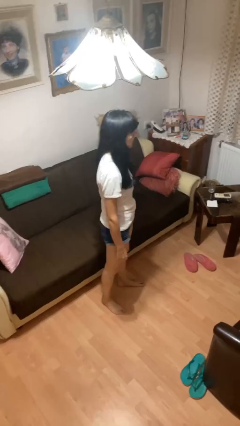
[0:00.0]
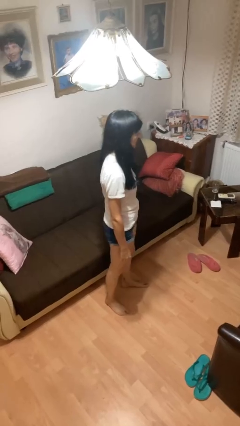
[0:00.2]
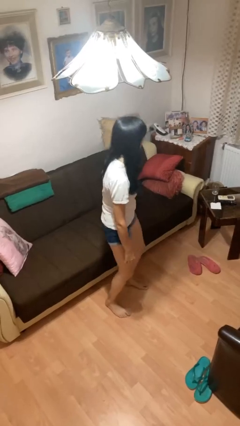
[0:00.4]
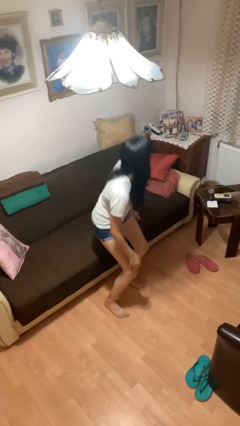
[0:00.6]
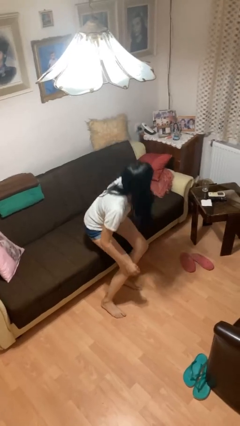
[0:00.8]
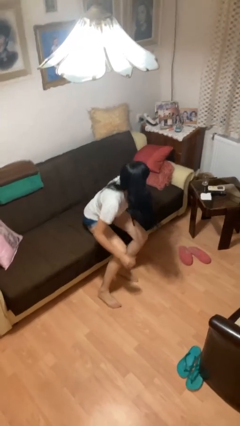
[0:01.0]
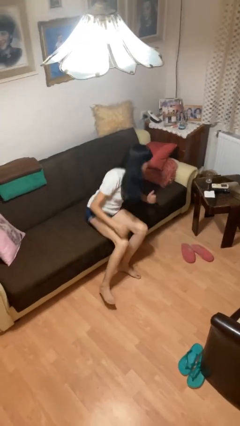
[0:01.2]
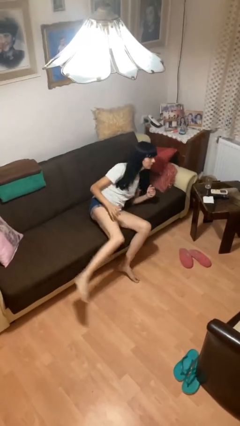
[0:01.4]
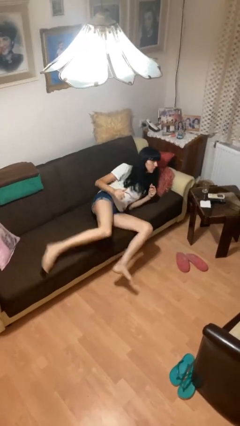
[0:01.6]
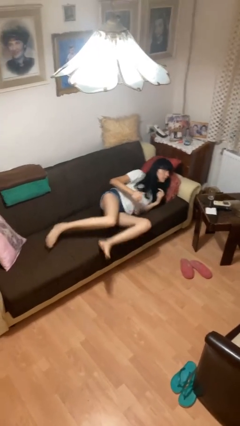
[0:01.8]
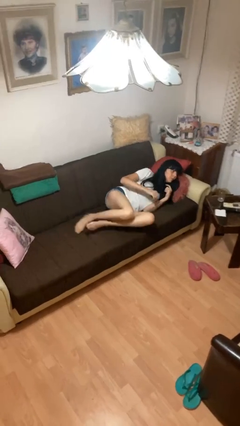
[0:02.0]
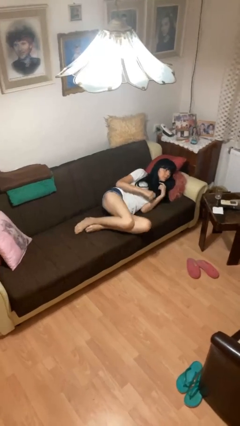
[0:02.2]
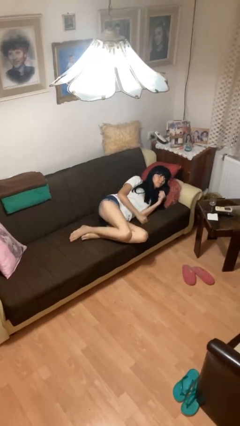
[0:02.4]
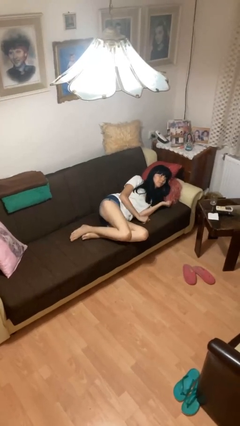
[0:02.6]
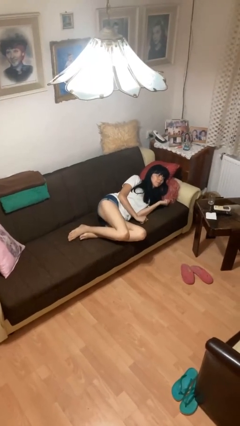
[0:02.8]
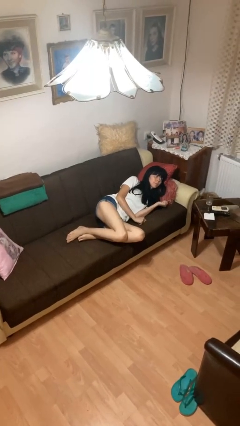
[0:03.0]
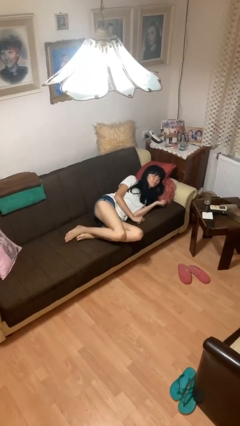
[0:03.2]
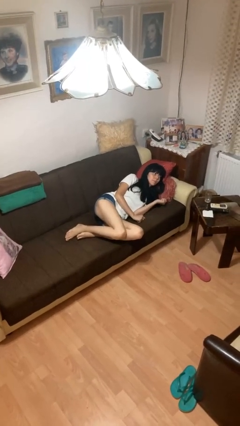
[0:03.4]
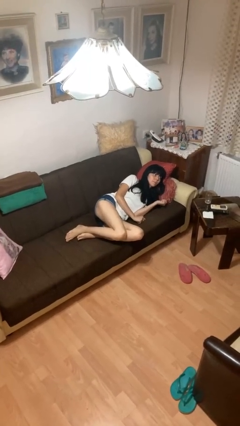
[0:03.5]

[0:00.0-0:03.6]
person lies down on couch

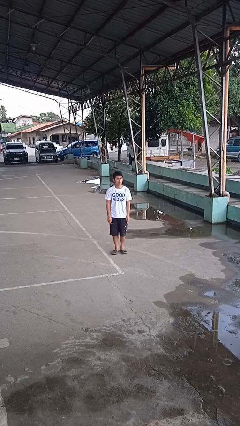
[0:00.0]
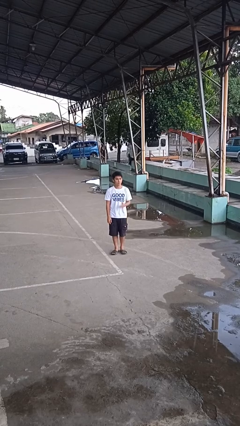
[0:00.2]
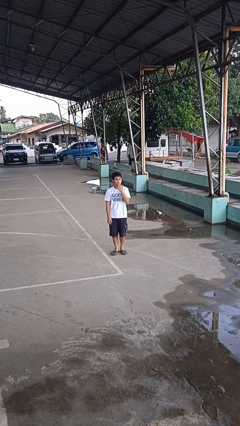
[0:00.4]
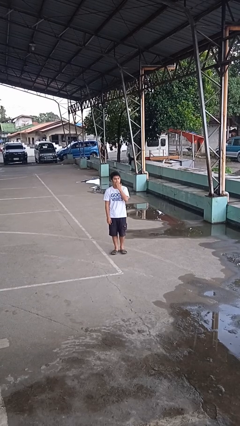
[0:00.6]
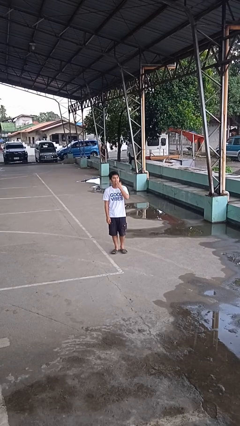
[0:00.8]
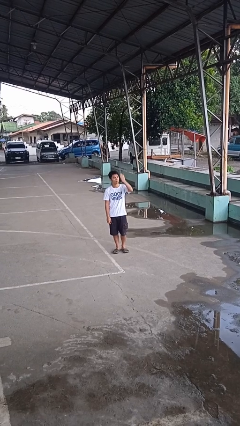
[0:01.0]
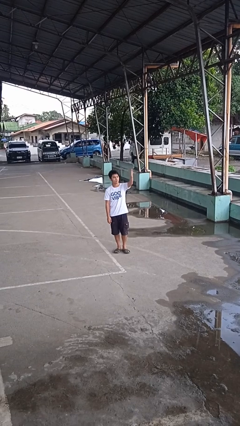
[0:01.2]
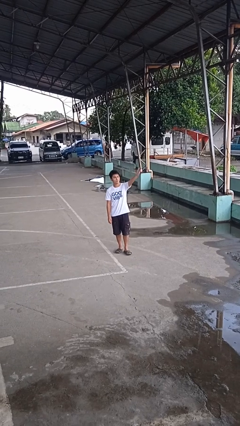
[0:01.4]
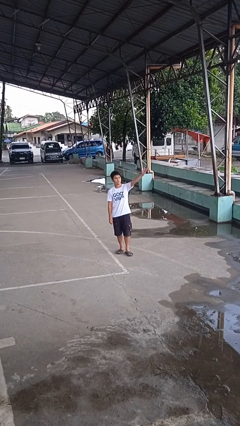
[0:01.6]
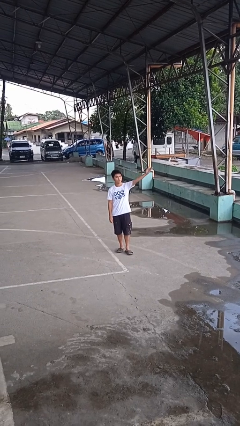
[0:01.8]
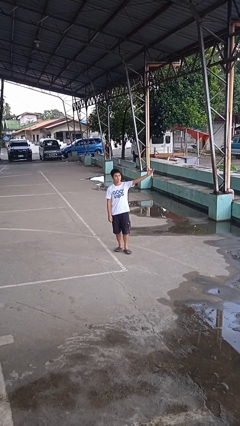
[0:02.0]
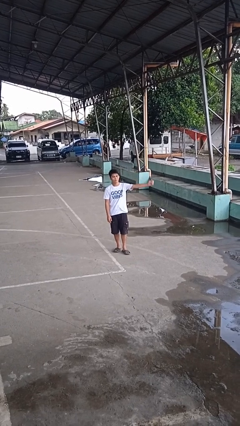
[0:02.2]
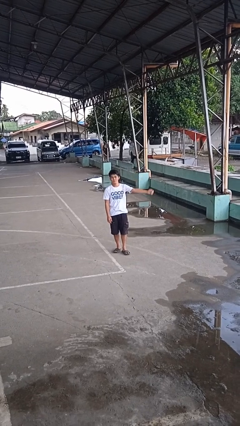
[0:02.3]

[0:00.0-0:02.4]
person gestures blow kiss

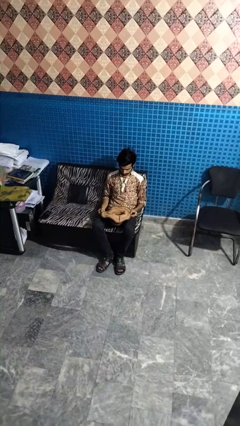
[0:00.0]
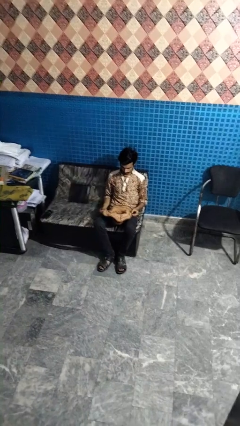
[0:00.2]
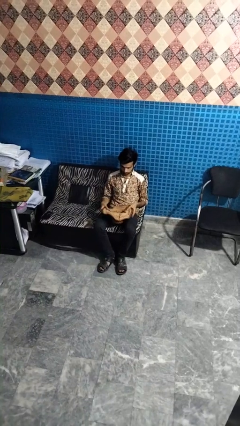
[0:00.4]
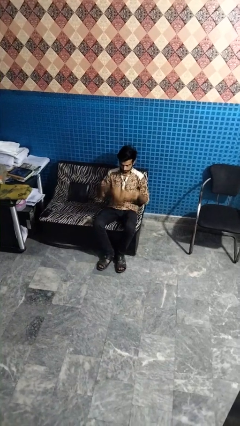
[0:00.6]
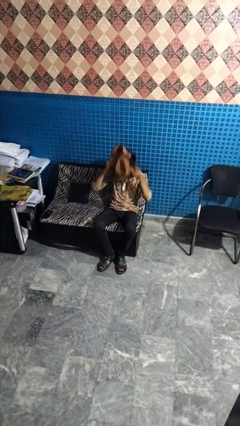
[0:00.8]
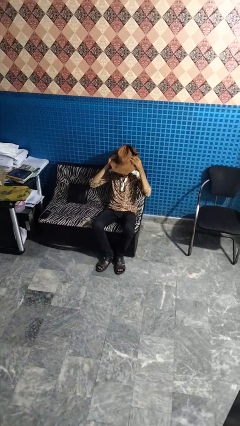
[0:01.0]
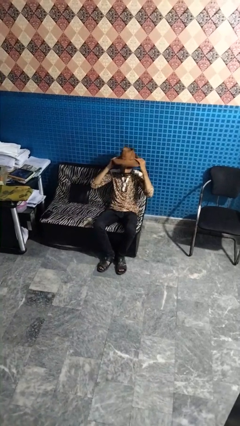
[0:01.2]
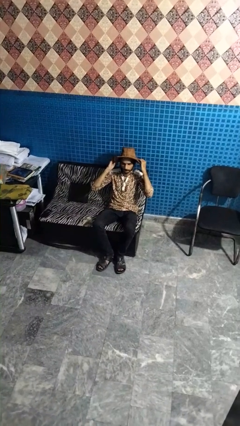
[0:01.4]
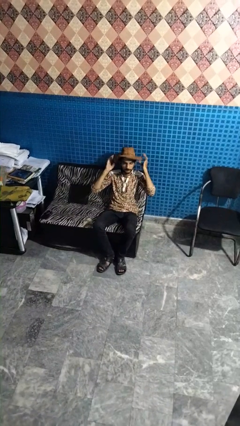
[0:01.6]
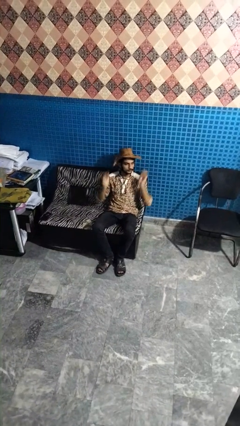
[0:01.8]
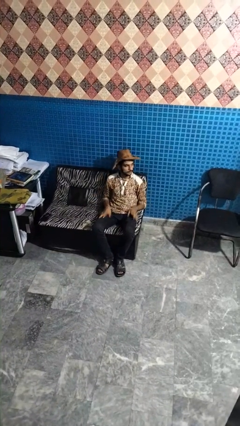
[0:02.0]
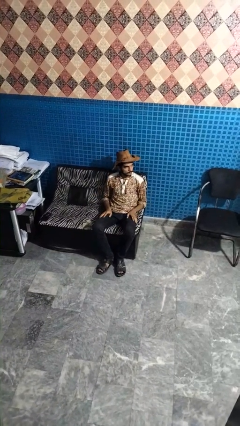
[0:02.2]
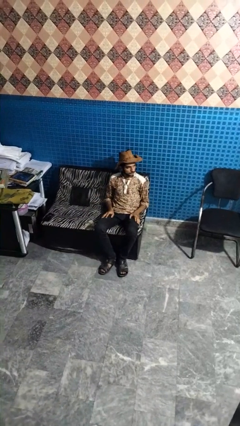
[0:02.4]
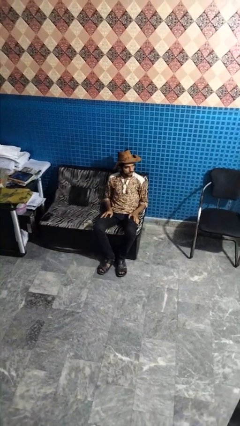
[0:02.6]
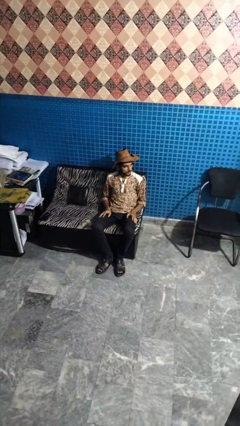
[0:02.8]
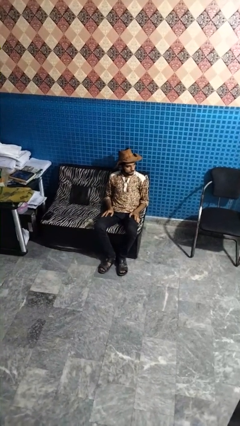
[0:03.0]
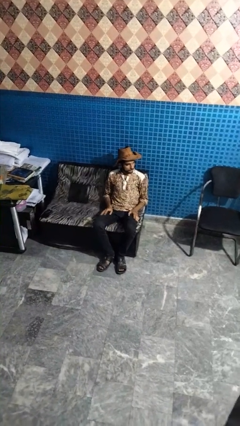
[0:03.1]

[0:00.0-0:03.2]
person puts on hat

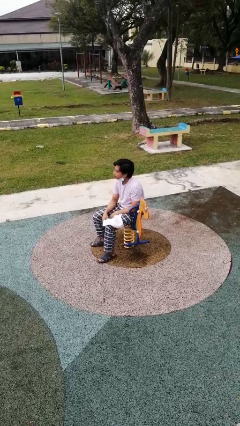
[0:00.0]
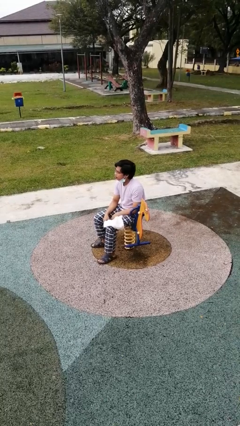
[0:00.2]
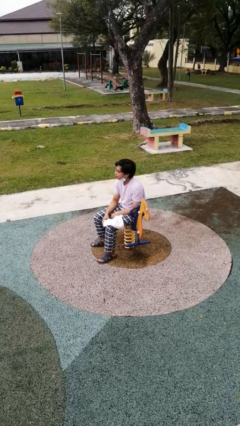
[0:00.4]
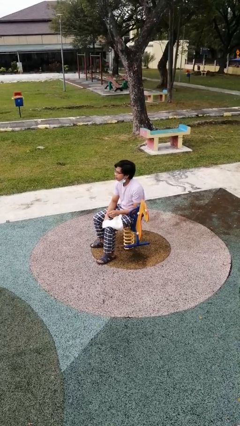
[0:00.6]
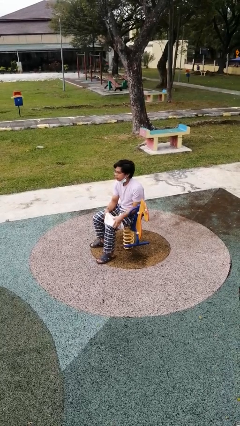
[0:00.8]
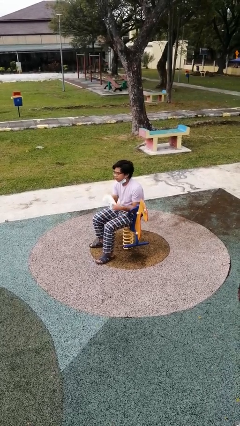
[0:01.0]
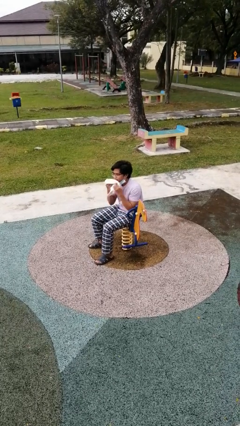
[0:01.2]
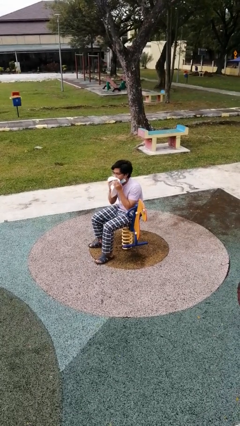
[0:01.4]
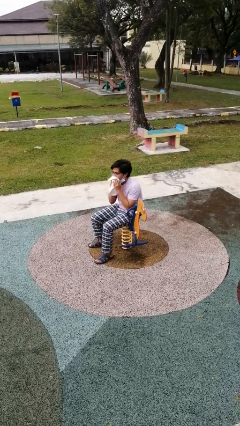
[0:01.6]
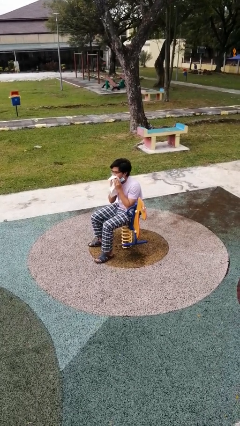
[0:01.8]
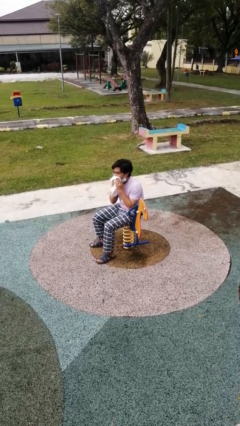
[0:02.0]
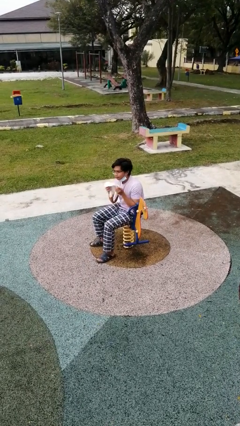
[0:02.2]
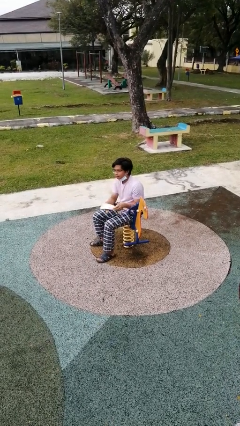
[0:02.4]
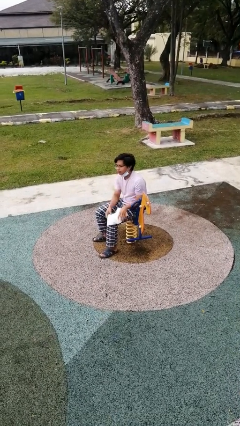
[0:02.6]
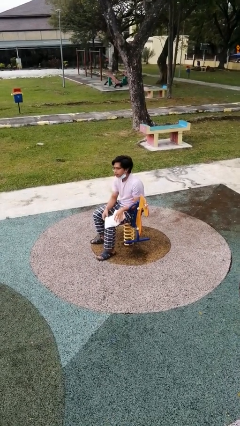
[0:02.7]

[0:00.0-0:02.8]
person wipes mouth with napkin

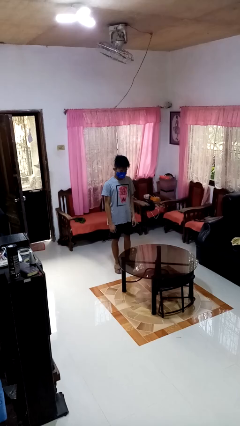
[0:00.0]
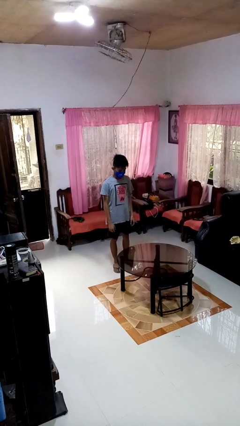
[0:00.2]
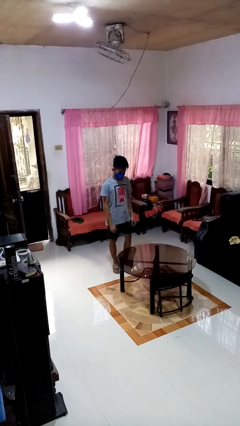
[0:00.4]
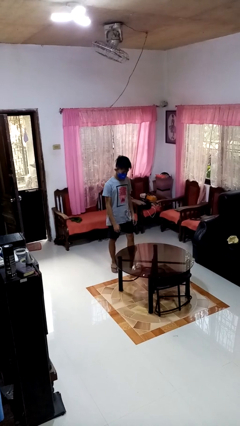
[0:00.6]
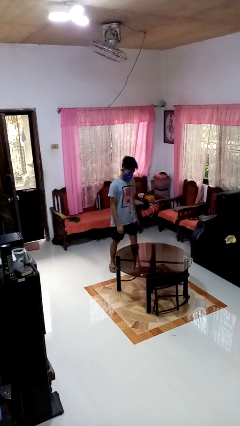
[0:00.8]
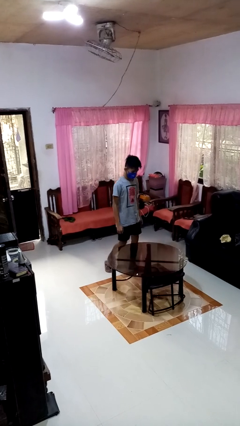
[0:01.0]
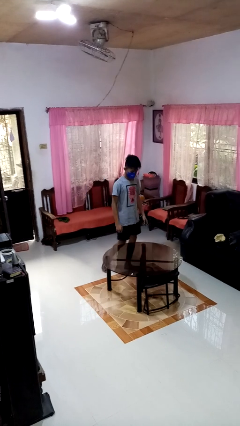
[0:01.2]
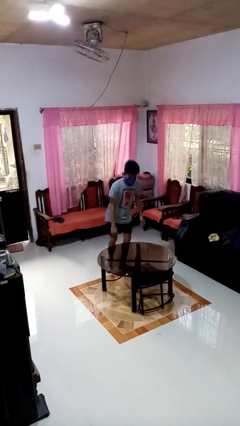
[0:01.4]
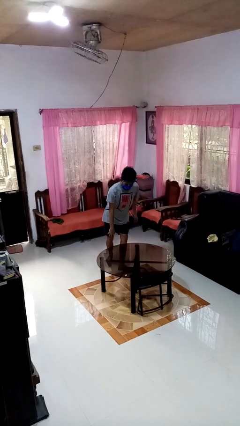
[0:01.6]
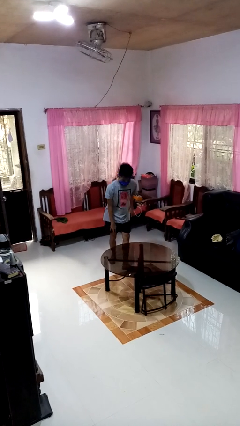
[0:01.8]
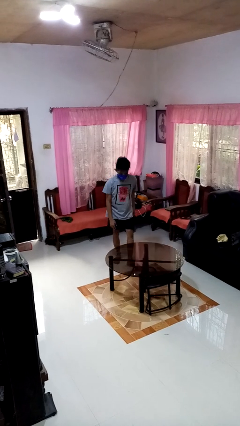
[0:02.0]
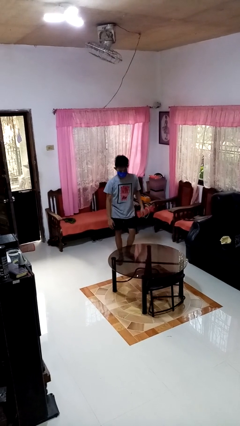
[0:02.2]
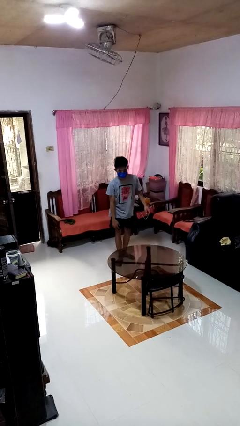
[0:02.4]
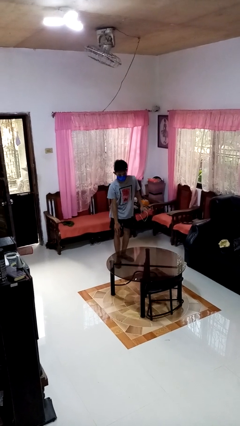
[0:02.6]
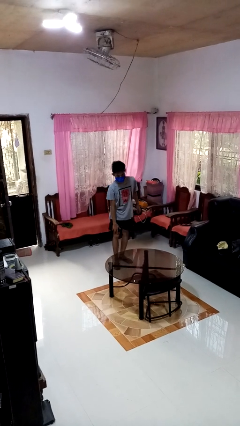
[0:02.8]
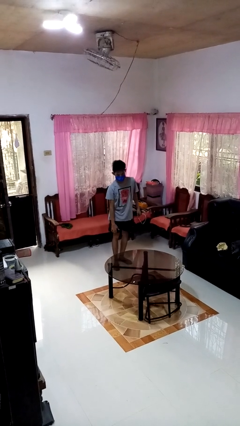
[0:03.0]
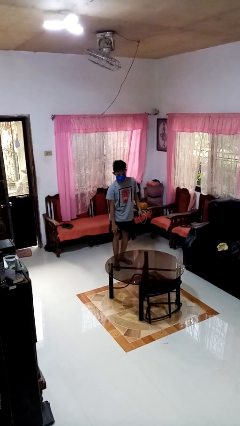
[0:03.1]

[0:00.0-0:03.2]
person bumps into table

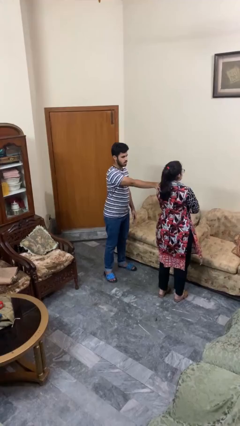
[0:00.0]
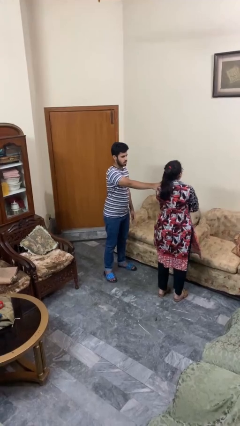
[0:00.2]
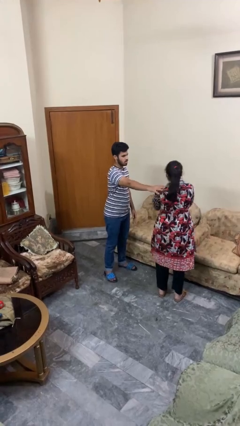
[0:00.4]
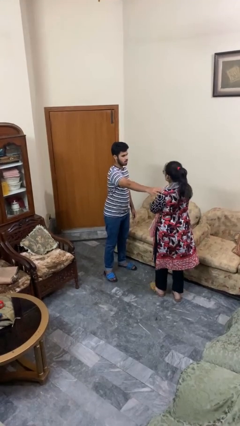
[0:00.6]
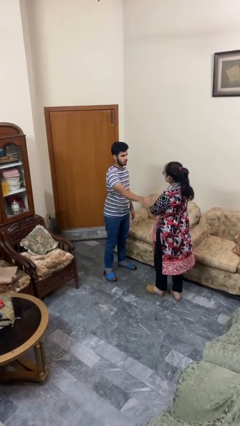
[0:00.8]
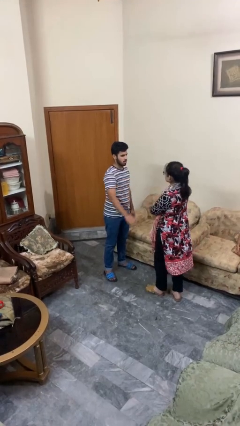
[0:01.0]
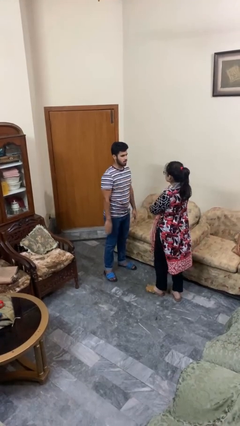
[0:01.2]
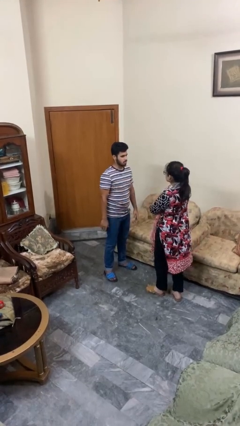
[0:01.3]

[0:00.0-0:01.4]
person spins person around

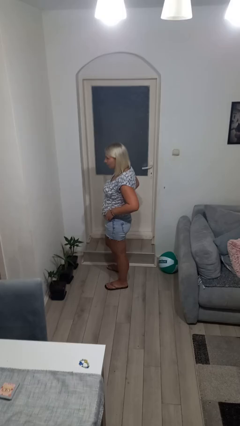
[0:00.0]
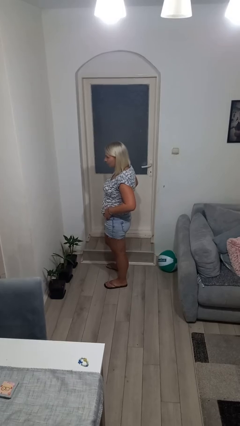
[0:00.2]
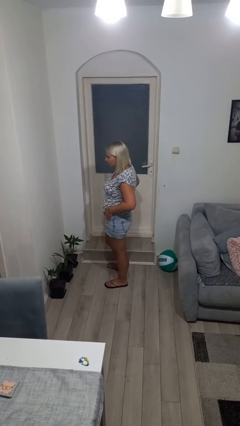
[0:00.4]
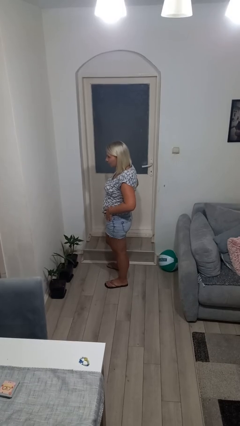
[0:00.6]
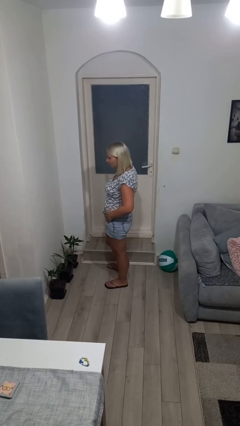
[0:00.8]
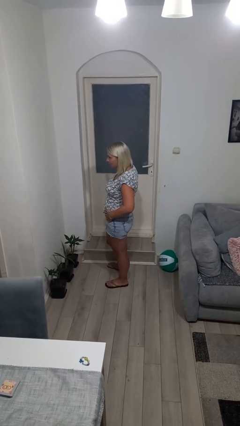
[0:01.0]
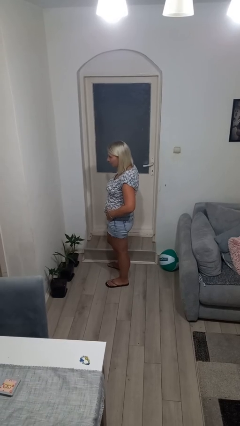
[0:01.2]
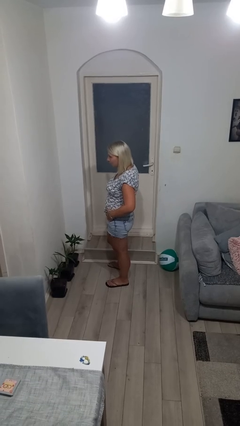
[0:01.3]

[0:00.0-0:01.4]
person puts hands in back pockets
